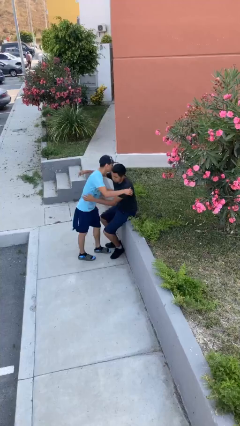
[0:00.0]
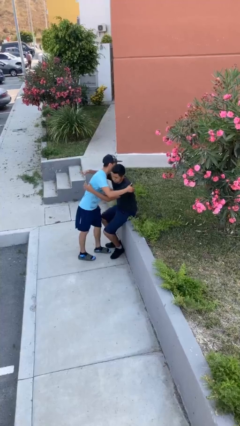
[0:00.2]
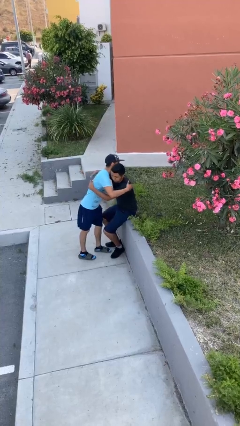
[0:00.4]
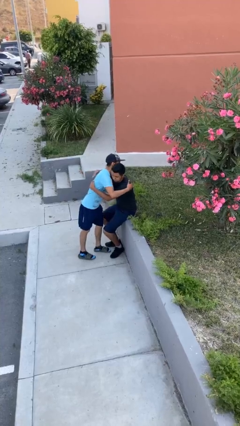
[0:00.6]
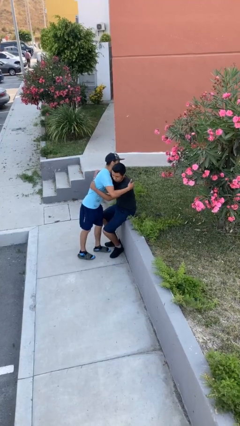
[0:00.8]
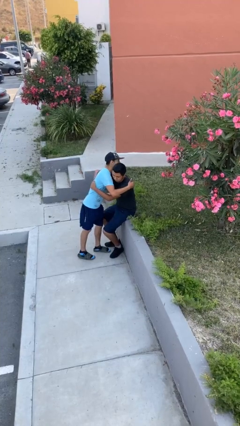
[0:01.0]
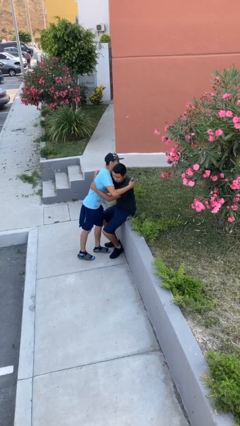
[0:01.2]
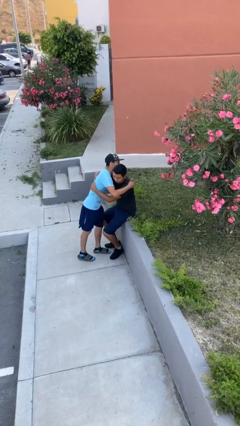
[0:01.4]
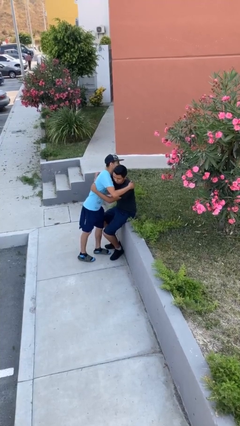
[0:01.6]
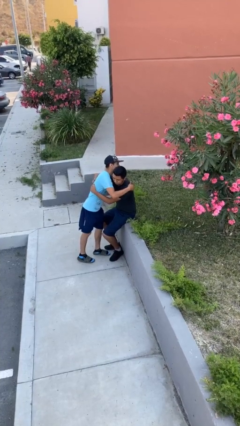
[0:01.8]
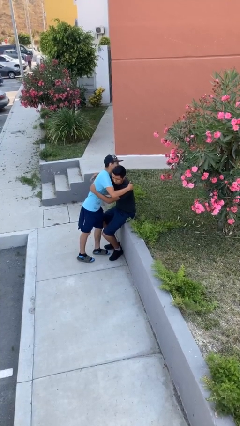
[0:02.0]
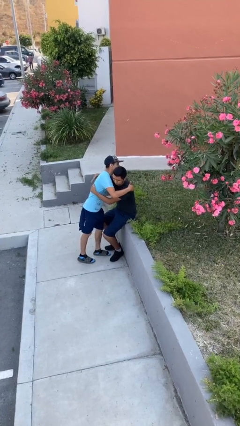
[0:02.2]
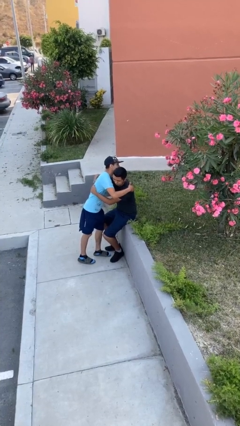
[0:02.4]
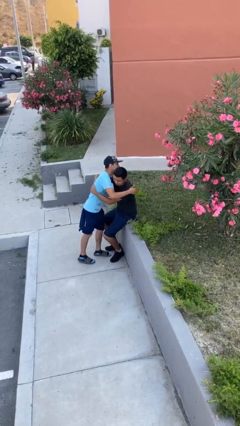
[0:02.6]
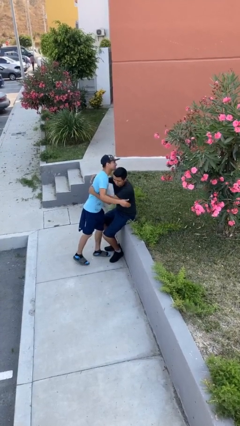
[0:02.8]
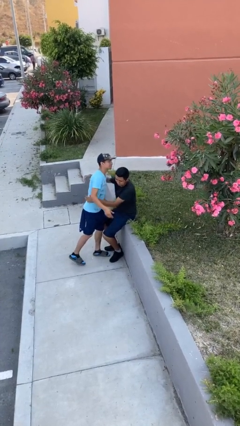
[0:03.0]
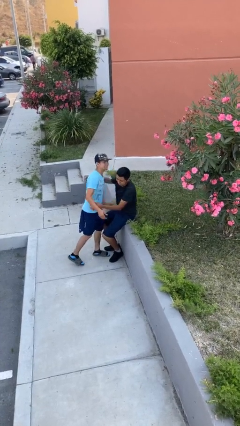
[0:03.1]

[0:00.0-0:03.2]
person embraces person

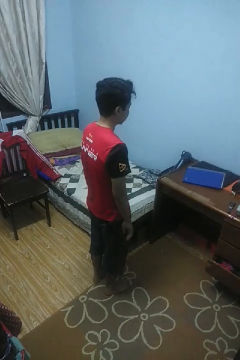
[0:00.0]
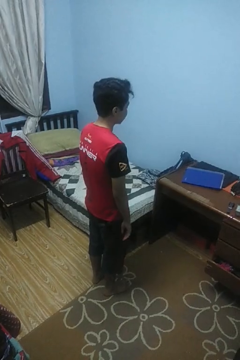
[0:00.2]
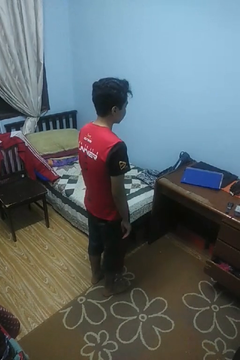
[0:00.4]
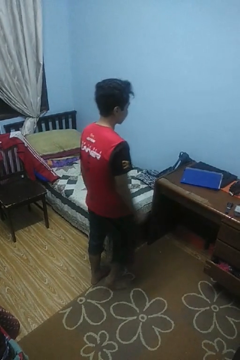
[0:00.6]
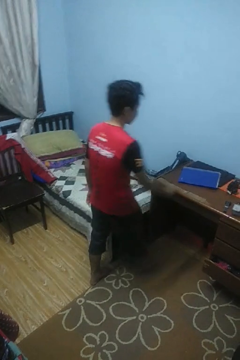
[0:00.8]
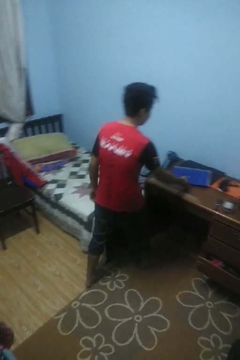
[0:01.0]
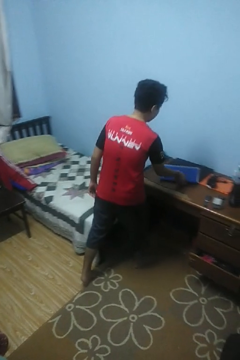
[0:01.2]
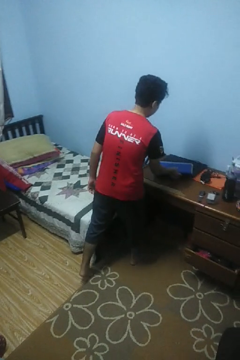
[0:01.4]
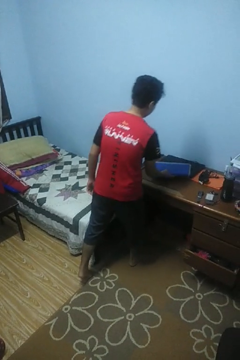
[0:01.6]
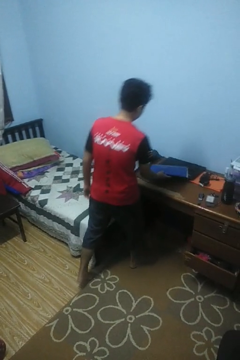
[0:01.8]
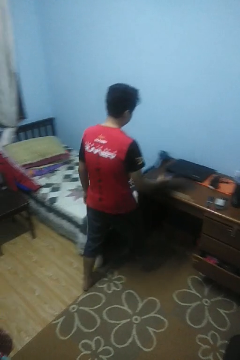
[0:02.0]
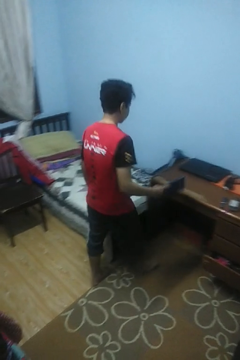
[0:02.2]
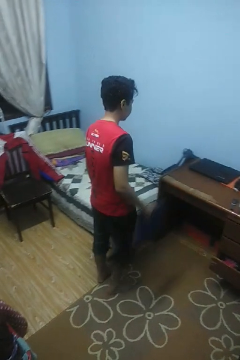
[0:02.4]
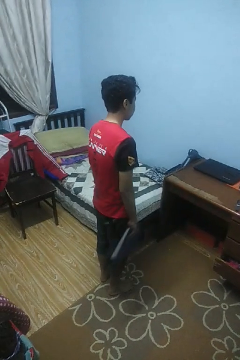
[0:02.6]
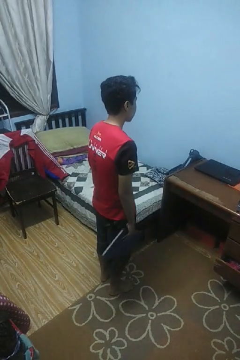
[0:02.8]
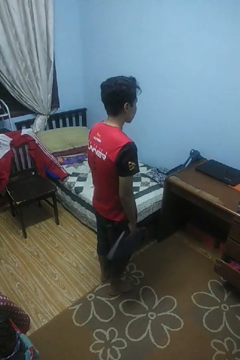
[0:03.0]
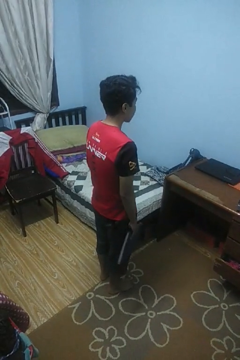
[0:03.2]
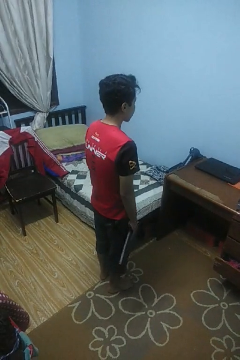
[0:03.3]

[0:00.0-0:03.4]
person picks up object from table

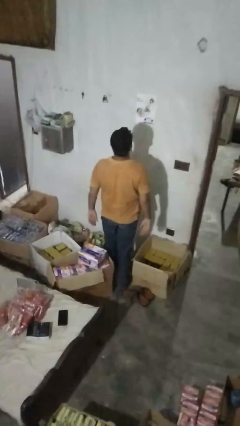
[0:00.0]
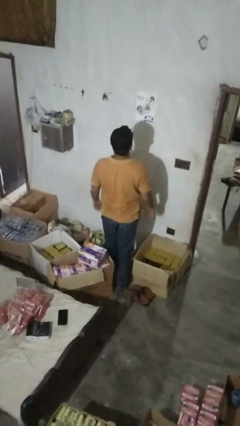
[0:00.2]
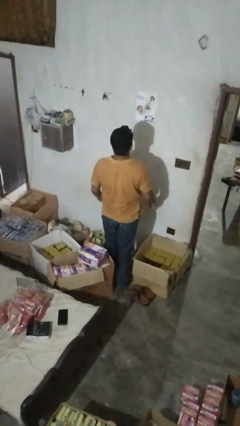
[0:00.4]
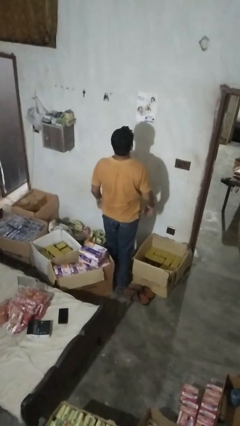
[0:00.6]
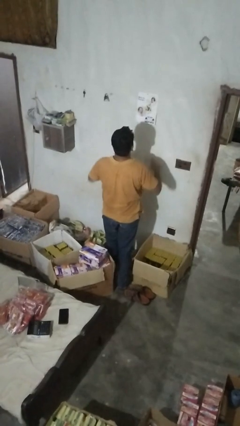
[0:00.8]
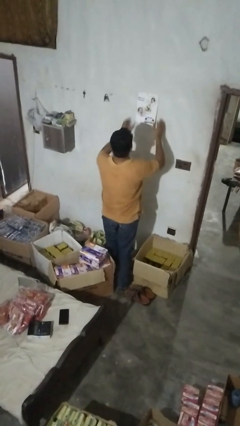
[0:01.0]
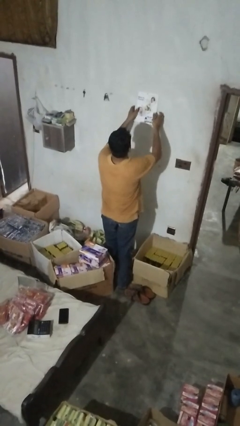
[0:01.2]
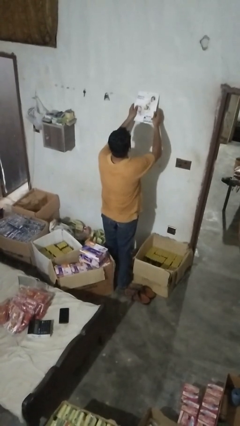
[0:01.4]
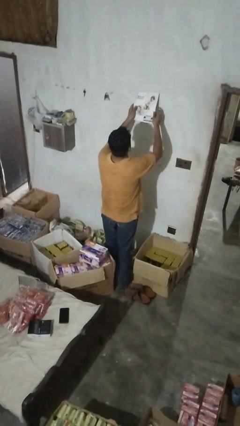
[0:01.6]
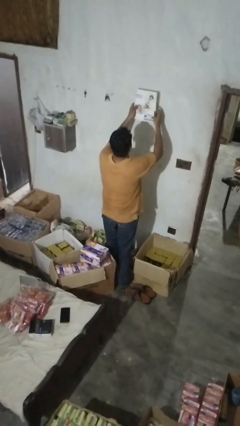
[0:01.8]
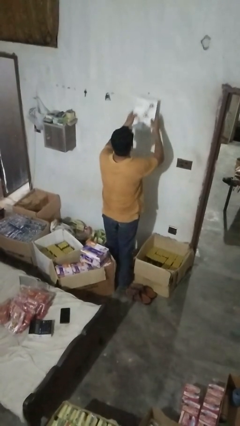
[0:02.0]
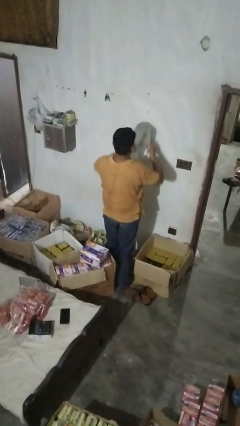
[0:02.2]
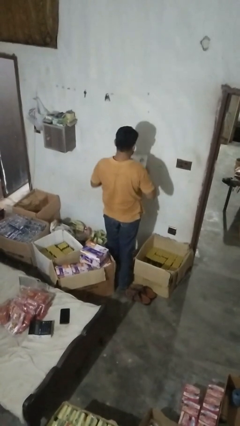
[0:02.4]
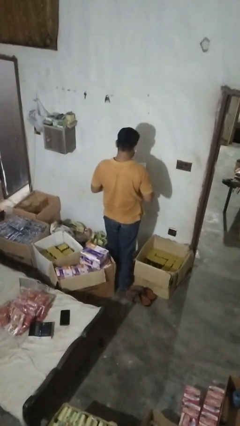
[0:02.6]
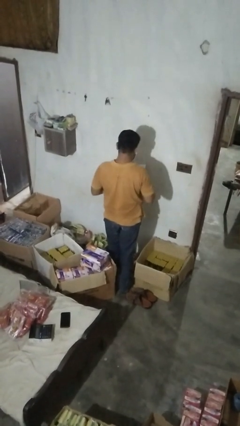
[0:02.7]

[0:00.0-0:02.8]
person takes down picture frame

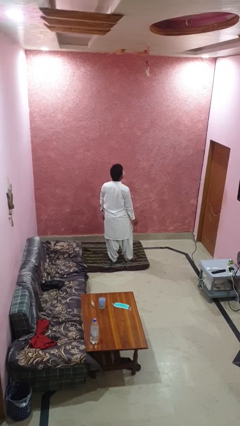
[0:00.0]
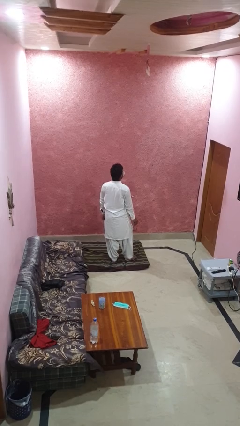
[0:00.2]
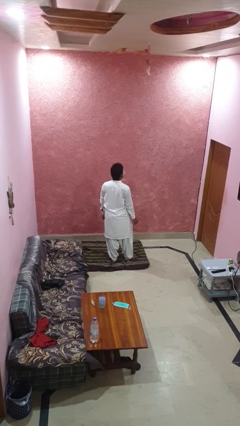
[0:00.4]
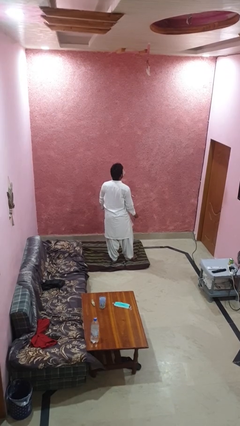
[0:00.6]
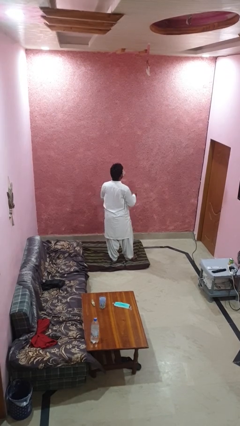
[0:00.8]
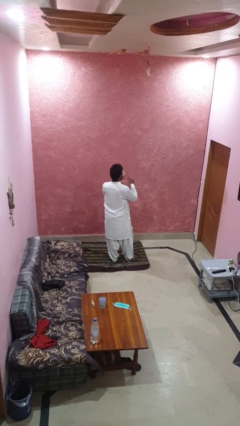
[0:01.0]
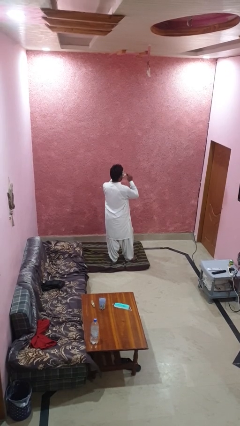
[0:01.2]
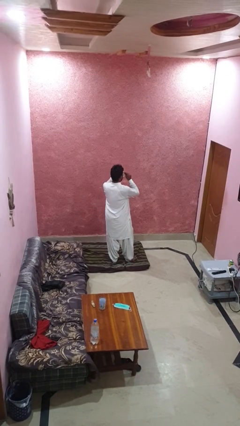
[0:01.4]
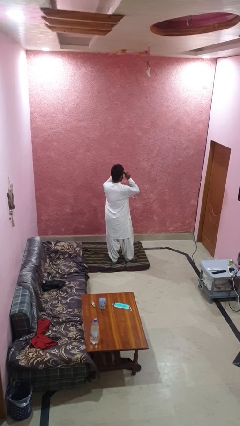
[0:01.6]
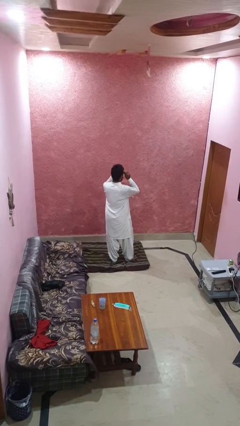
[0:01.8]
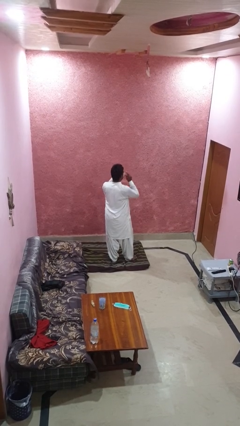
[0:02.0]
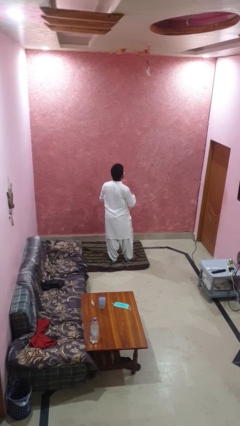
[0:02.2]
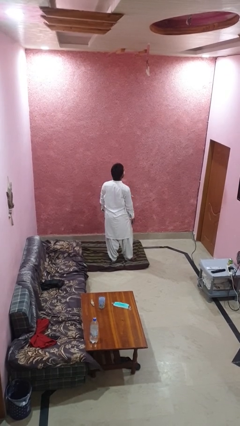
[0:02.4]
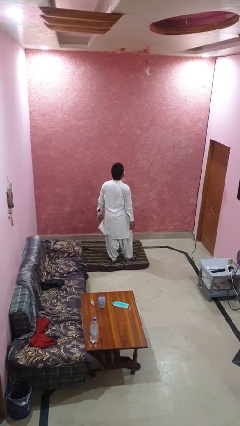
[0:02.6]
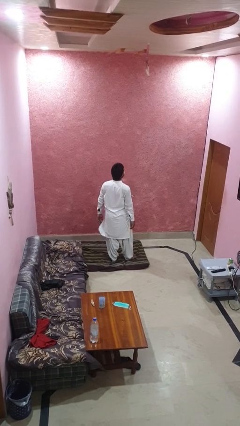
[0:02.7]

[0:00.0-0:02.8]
person puts on glasses

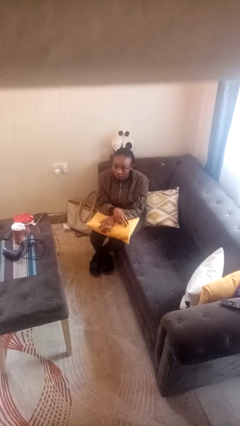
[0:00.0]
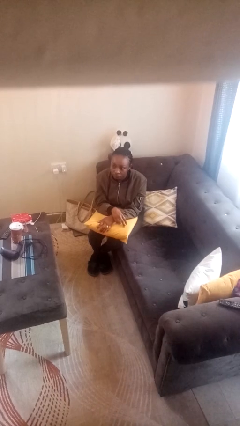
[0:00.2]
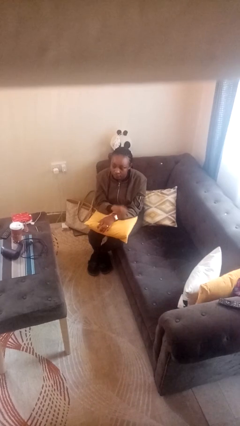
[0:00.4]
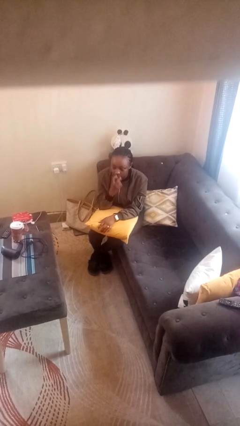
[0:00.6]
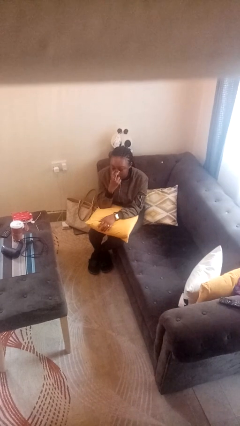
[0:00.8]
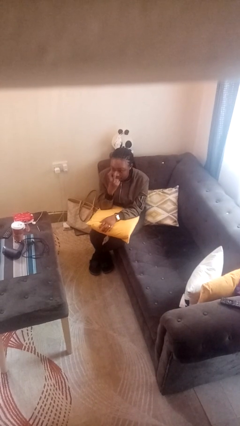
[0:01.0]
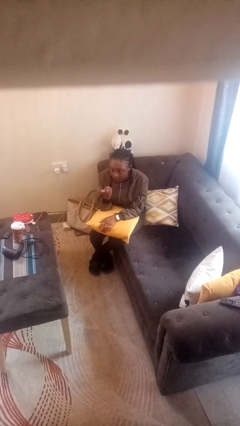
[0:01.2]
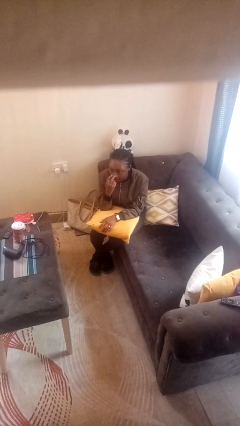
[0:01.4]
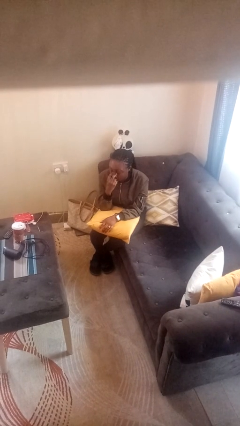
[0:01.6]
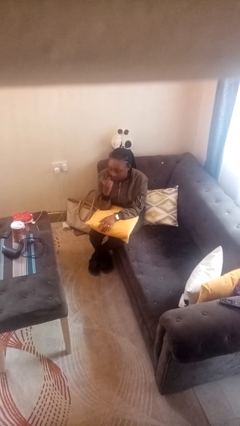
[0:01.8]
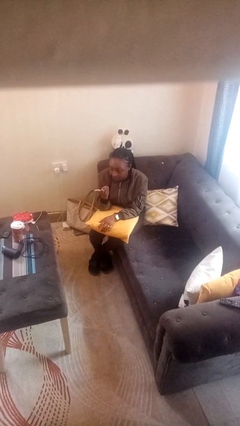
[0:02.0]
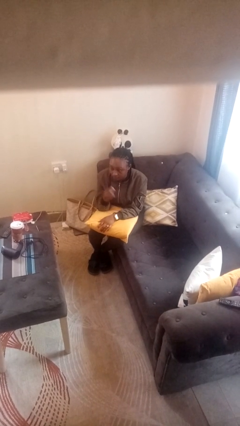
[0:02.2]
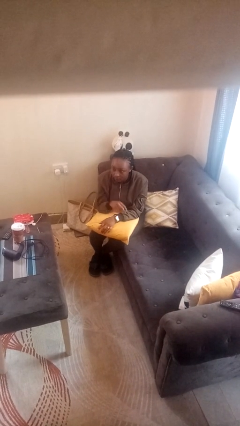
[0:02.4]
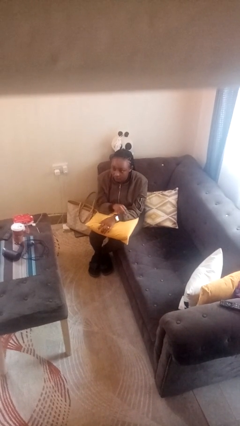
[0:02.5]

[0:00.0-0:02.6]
person gestures watch closely

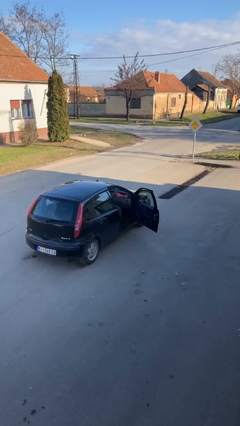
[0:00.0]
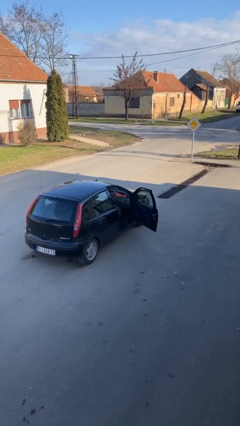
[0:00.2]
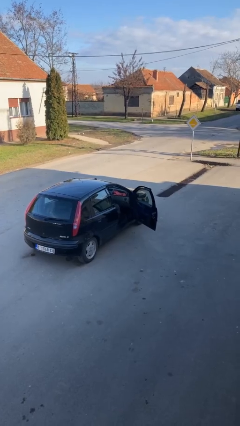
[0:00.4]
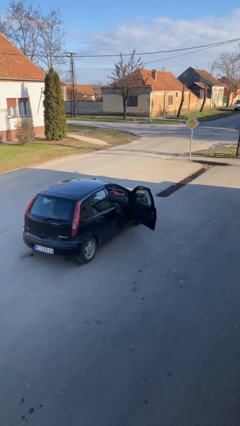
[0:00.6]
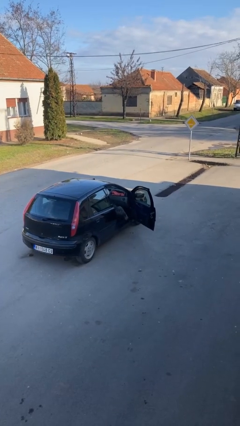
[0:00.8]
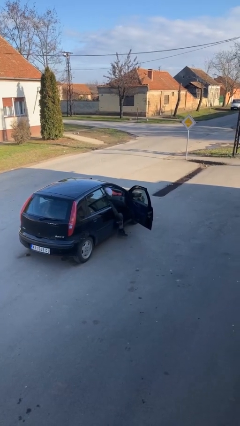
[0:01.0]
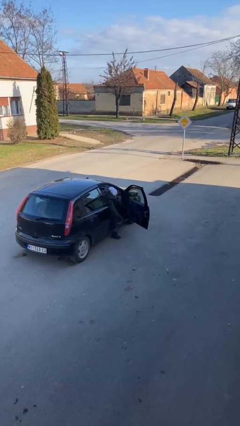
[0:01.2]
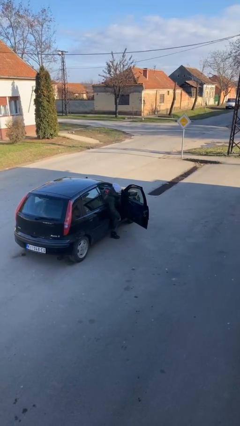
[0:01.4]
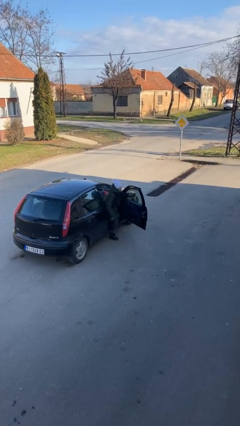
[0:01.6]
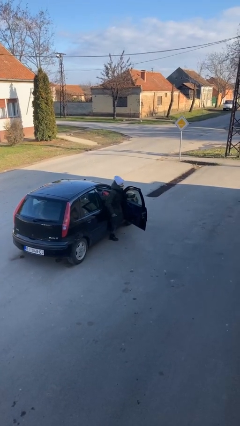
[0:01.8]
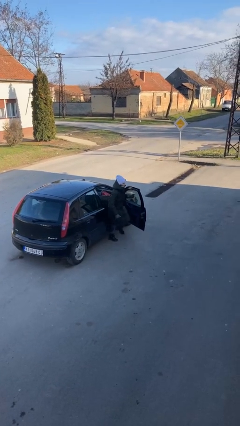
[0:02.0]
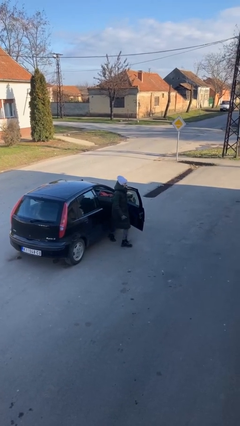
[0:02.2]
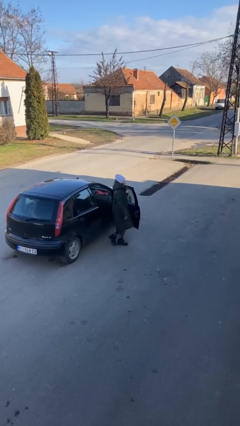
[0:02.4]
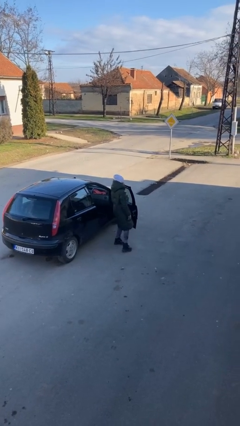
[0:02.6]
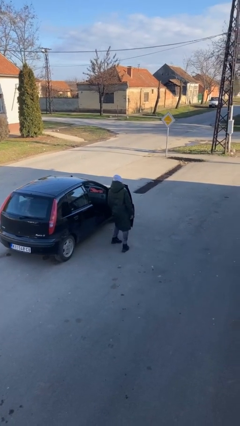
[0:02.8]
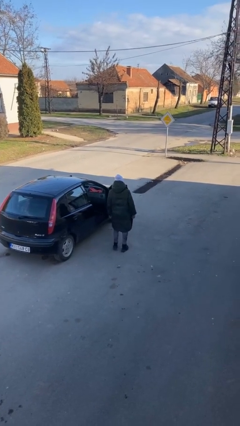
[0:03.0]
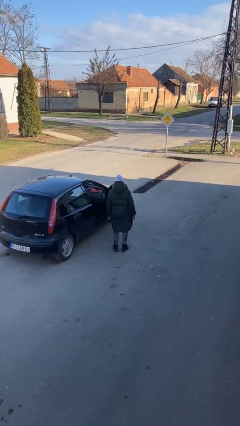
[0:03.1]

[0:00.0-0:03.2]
person exits car

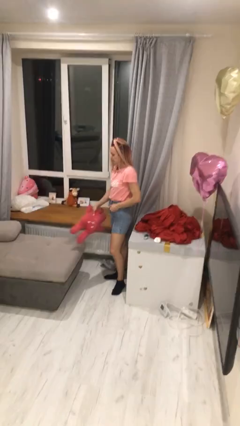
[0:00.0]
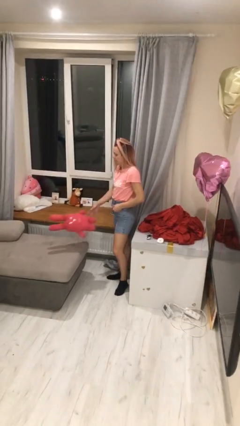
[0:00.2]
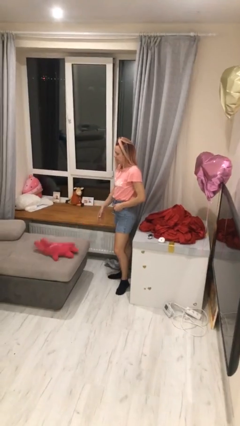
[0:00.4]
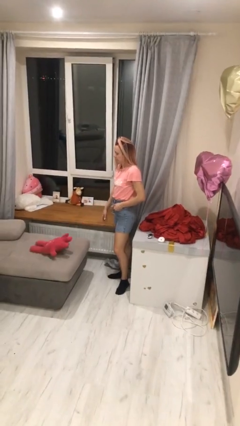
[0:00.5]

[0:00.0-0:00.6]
person throws object on bed
